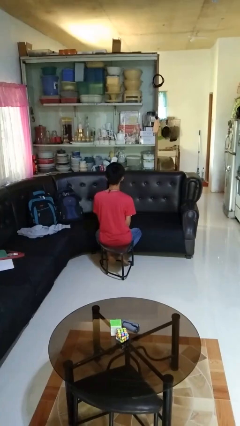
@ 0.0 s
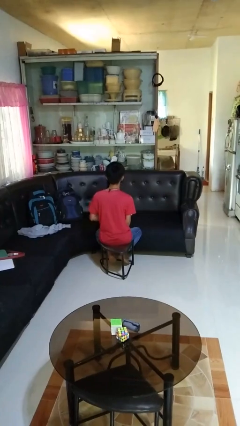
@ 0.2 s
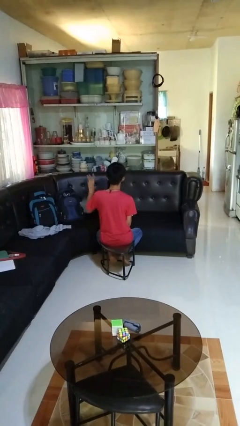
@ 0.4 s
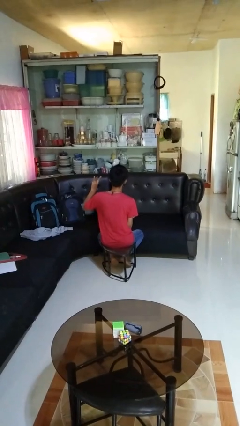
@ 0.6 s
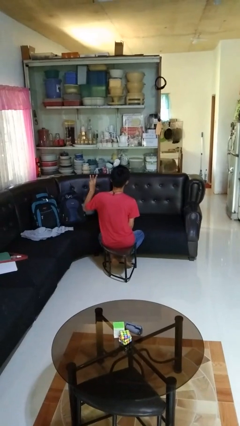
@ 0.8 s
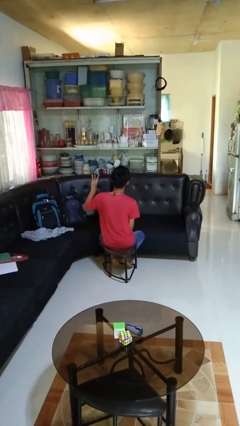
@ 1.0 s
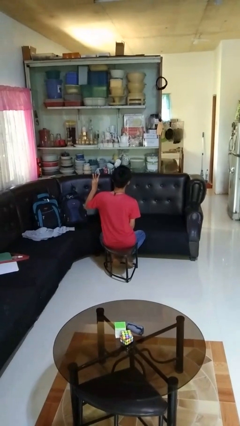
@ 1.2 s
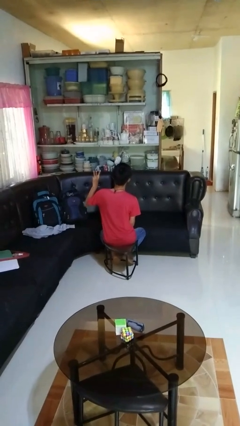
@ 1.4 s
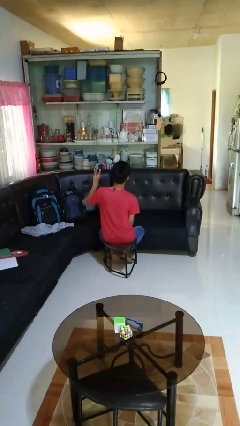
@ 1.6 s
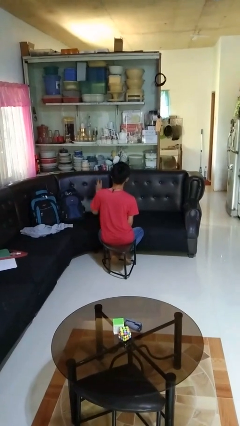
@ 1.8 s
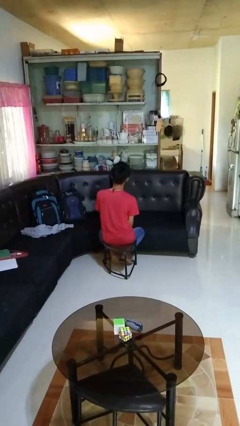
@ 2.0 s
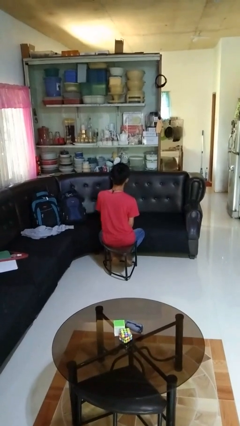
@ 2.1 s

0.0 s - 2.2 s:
person gestures number three

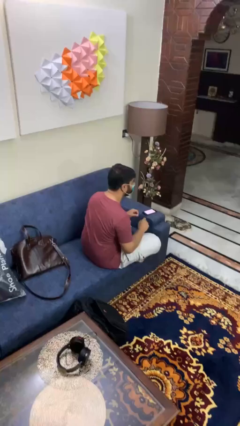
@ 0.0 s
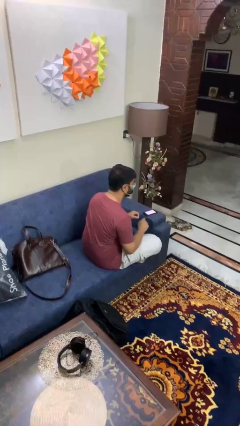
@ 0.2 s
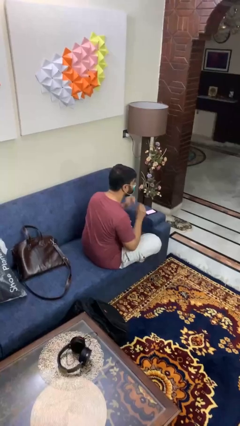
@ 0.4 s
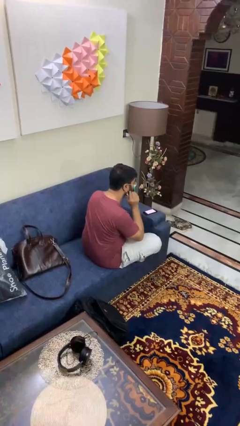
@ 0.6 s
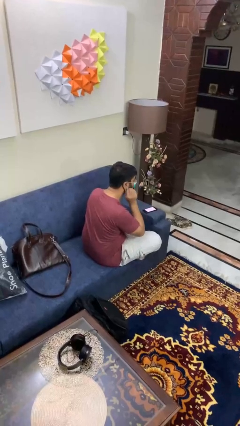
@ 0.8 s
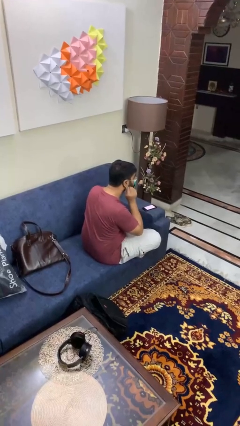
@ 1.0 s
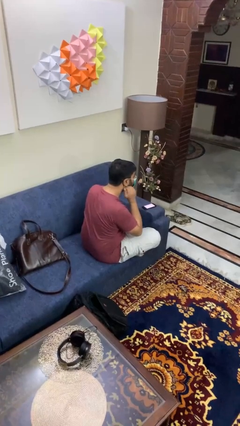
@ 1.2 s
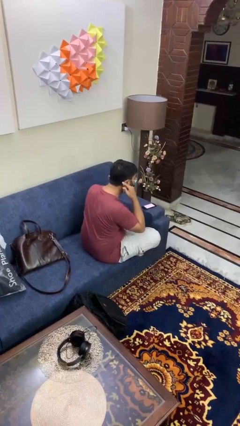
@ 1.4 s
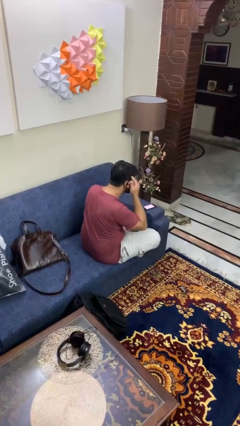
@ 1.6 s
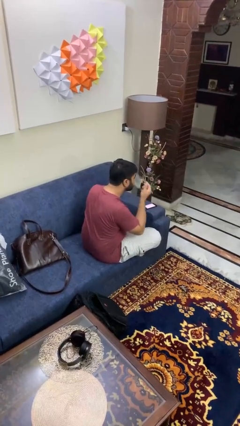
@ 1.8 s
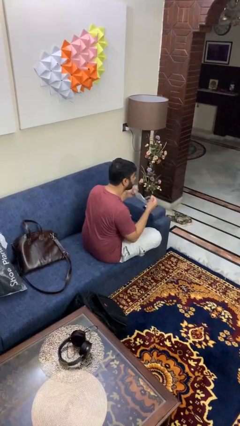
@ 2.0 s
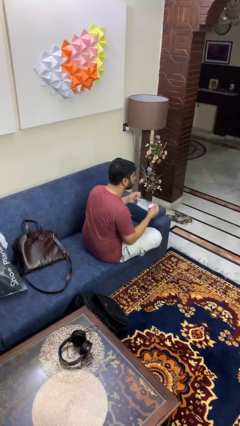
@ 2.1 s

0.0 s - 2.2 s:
person takes off facemask

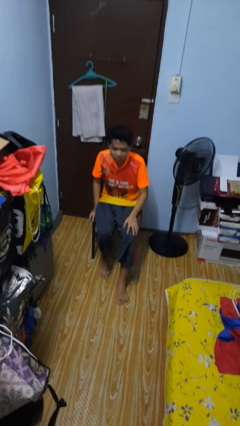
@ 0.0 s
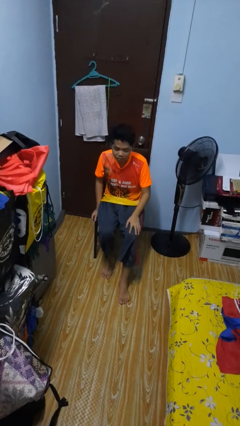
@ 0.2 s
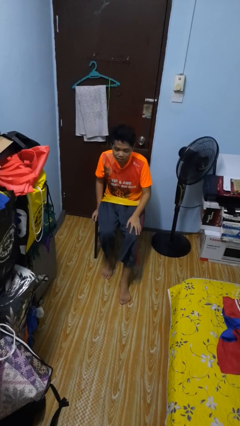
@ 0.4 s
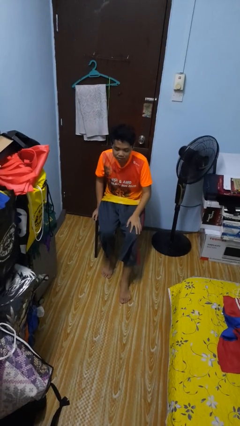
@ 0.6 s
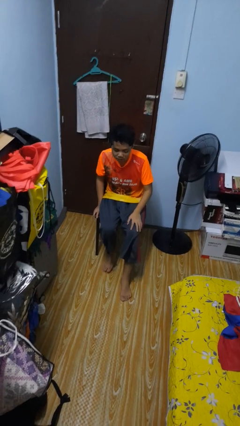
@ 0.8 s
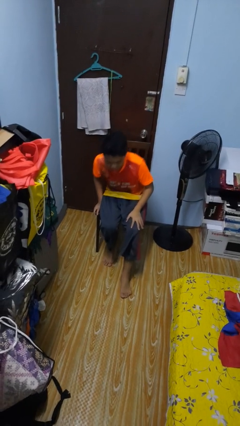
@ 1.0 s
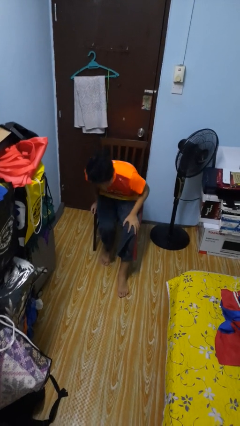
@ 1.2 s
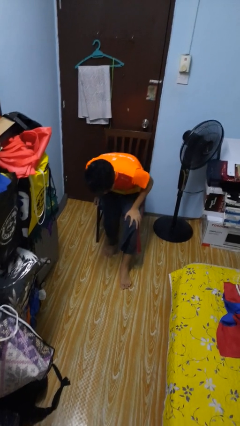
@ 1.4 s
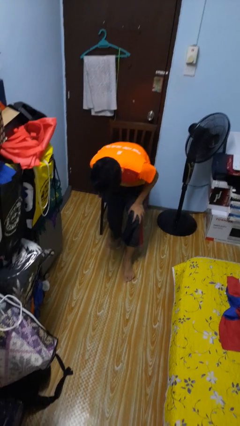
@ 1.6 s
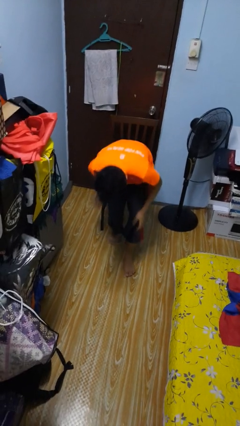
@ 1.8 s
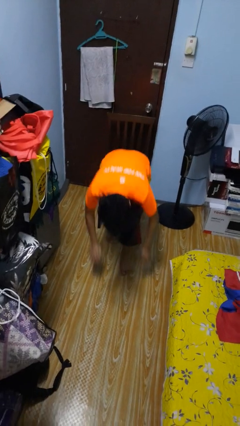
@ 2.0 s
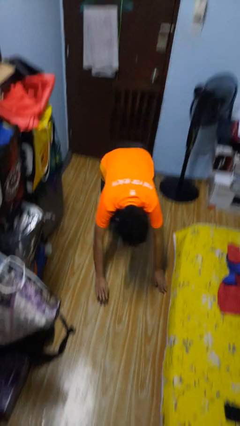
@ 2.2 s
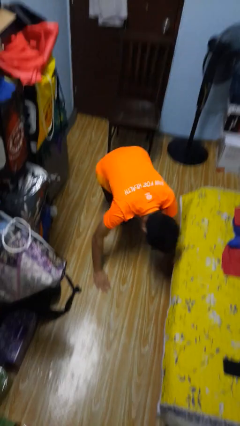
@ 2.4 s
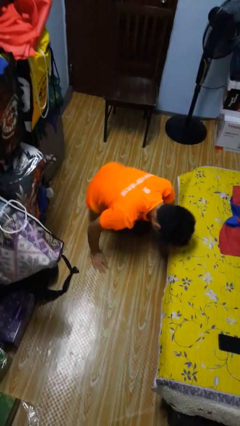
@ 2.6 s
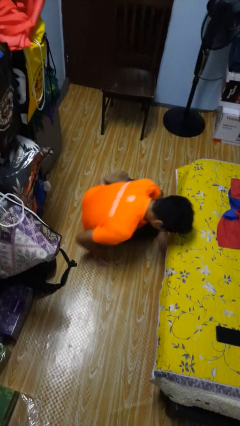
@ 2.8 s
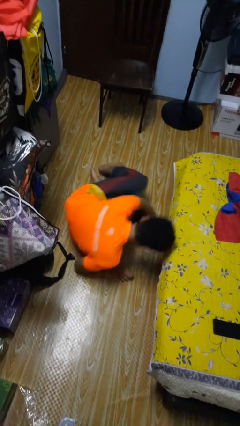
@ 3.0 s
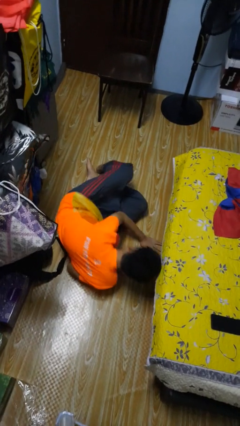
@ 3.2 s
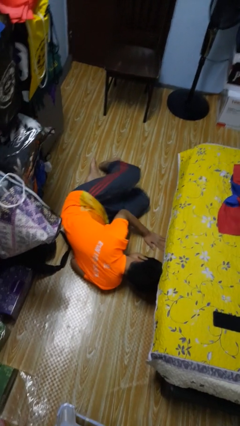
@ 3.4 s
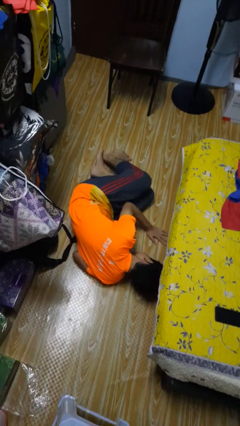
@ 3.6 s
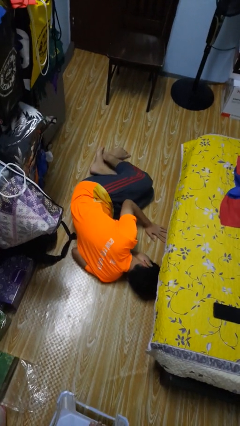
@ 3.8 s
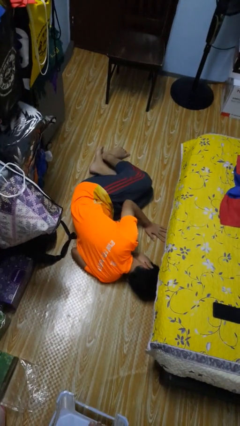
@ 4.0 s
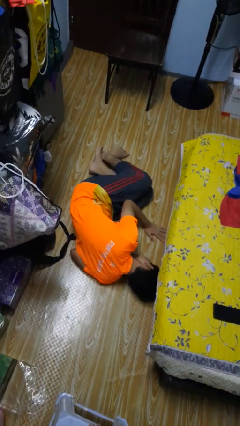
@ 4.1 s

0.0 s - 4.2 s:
person falls from chair

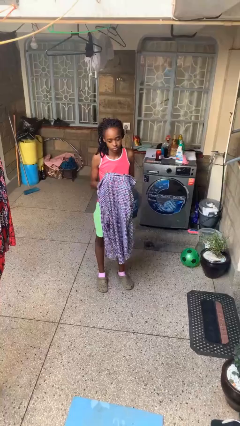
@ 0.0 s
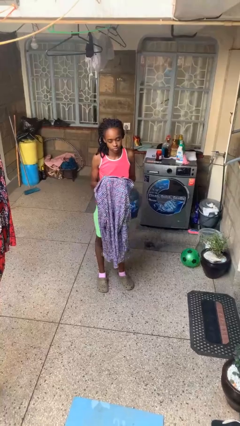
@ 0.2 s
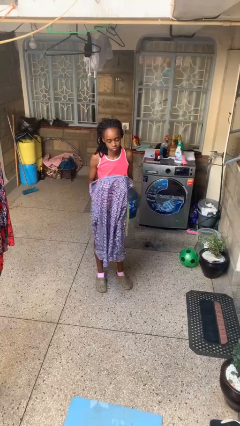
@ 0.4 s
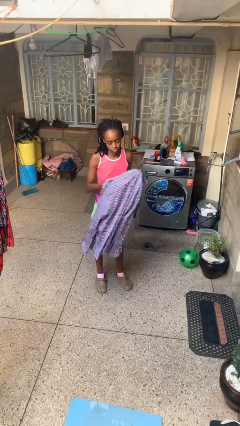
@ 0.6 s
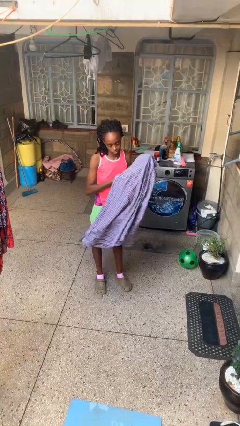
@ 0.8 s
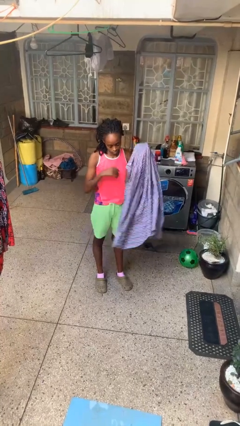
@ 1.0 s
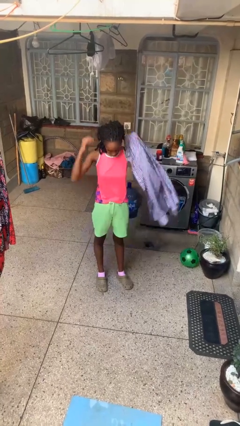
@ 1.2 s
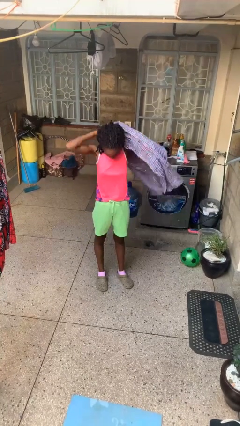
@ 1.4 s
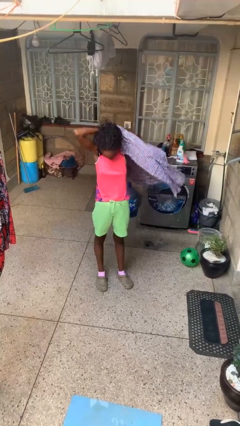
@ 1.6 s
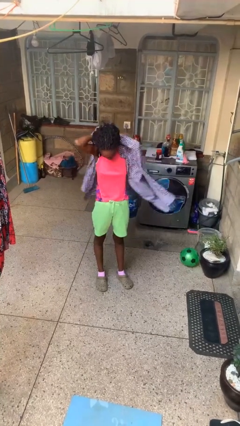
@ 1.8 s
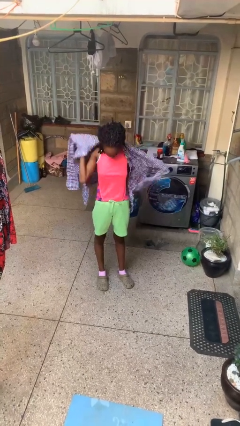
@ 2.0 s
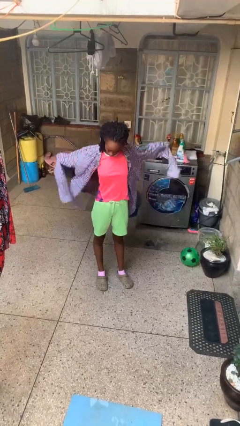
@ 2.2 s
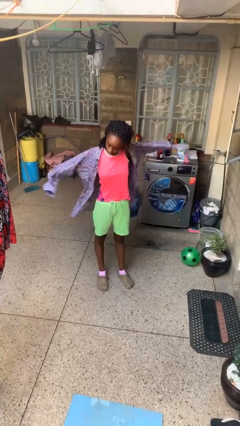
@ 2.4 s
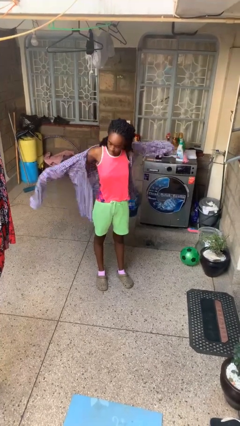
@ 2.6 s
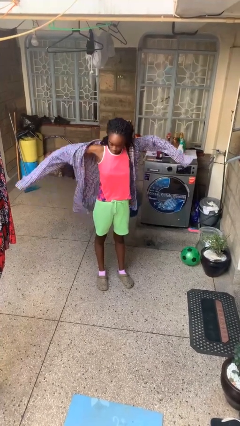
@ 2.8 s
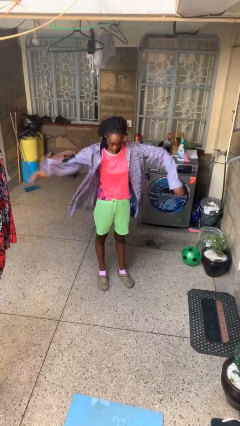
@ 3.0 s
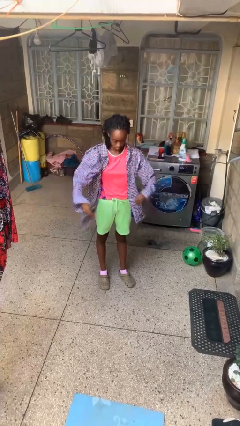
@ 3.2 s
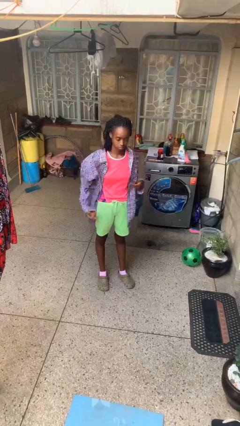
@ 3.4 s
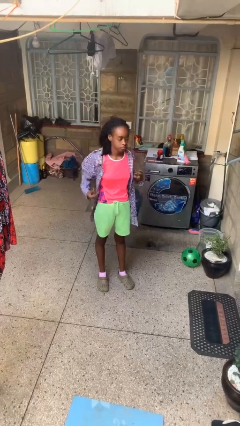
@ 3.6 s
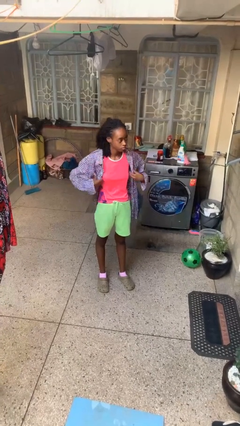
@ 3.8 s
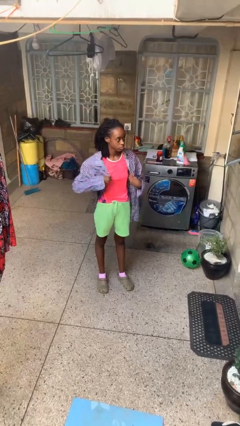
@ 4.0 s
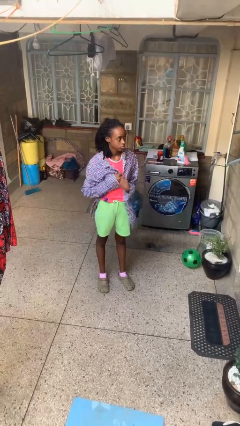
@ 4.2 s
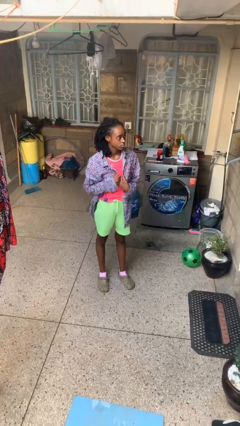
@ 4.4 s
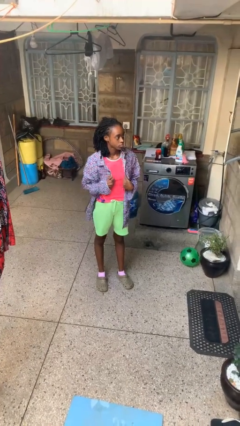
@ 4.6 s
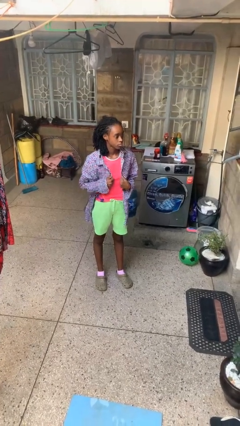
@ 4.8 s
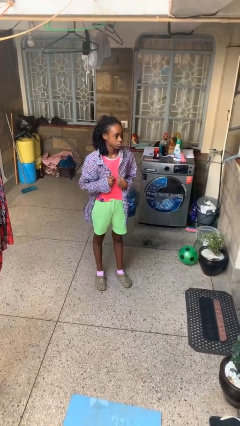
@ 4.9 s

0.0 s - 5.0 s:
person puts on shirt

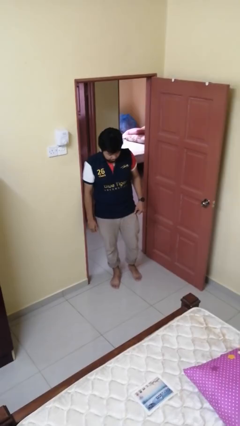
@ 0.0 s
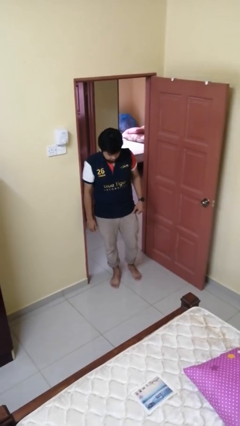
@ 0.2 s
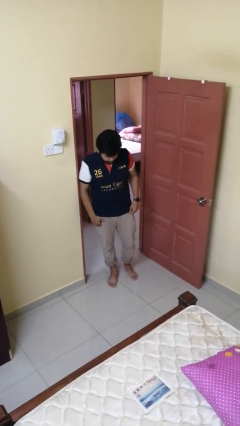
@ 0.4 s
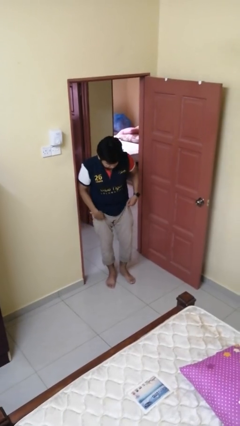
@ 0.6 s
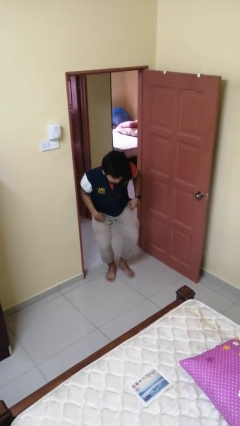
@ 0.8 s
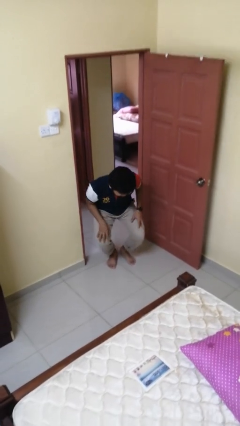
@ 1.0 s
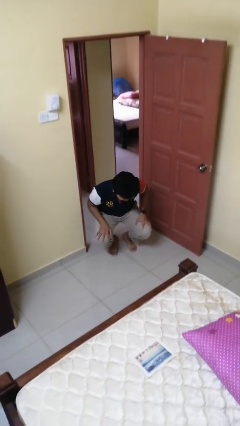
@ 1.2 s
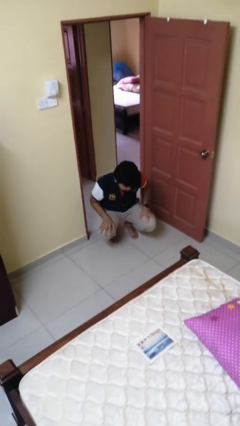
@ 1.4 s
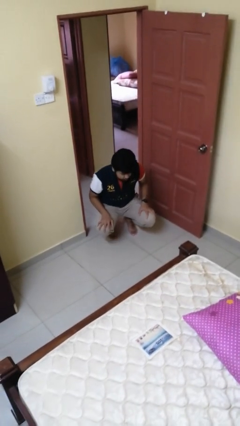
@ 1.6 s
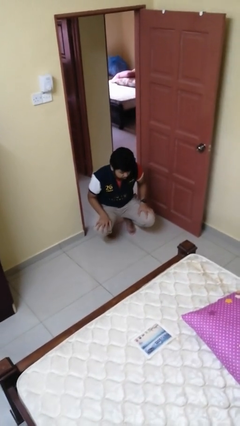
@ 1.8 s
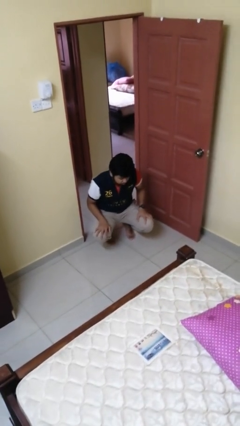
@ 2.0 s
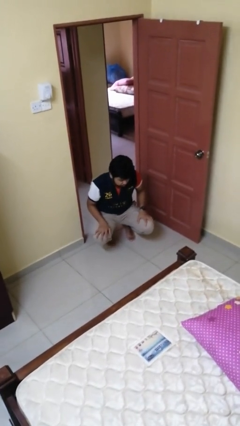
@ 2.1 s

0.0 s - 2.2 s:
person squats

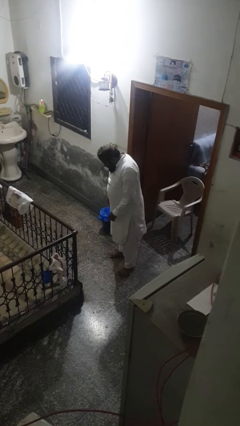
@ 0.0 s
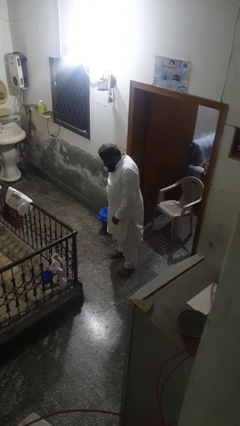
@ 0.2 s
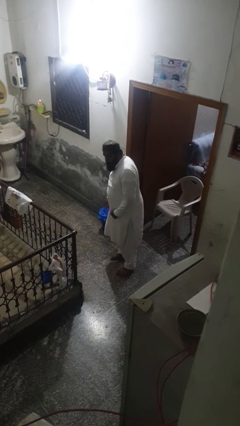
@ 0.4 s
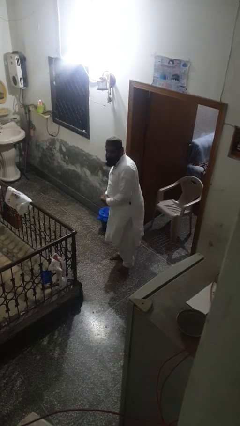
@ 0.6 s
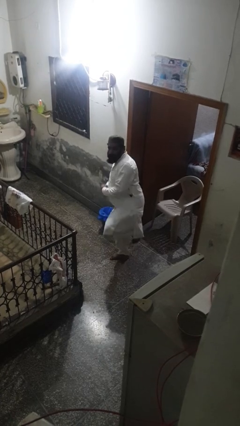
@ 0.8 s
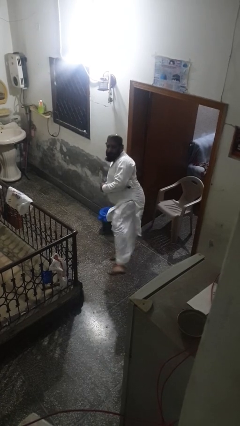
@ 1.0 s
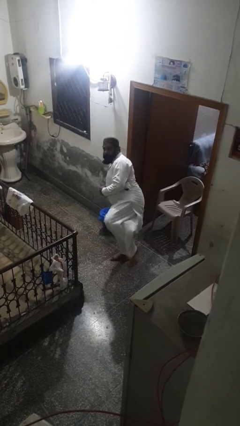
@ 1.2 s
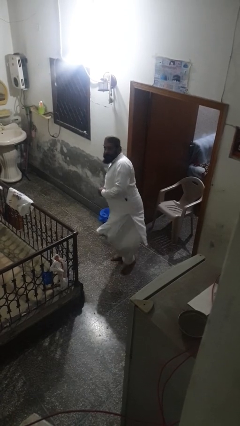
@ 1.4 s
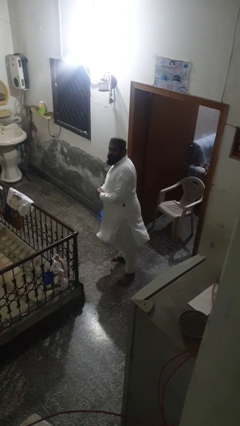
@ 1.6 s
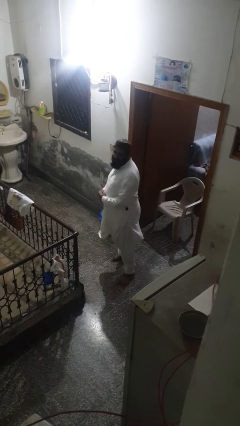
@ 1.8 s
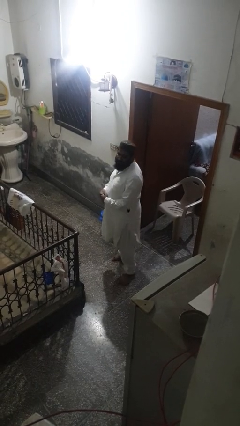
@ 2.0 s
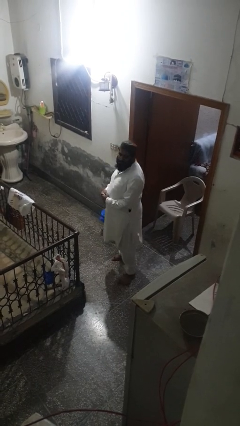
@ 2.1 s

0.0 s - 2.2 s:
person karate kicks
